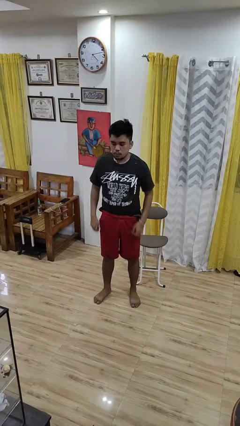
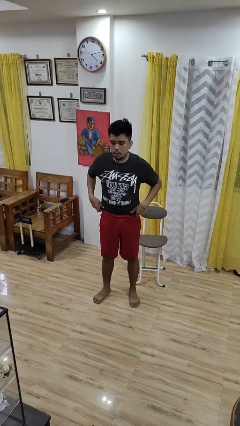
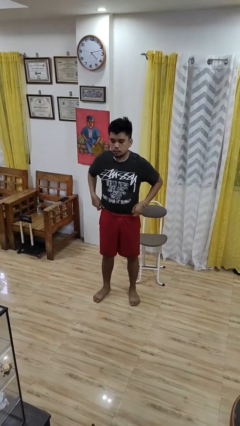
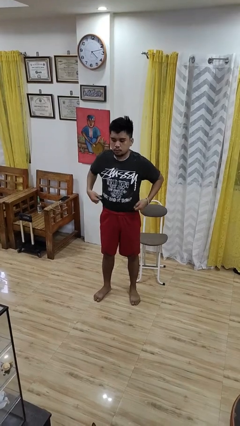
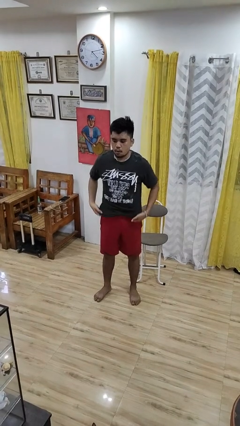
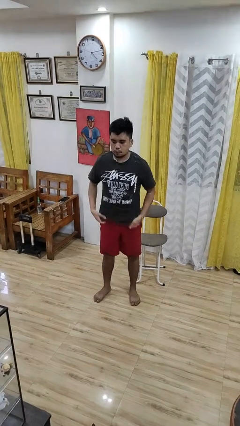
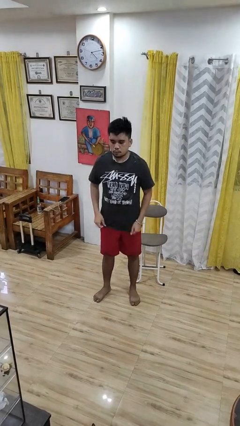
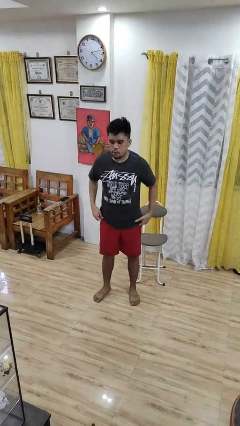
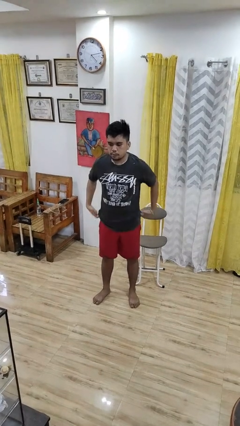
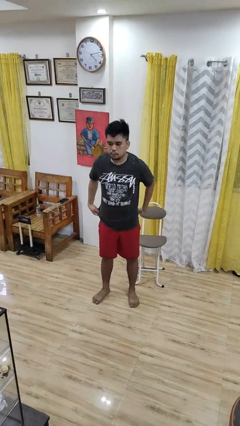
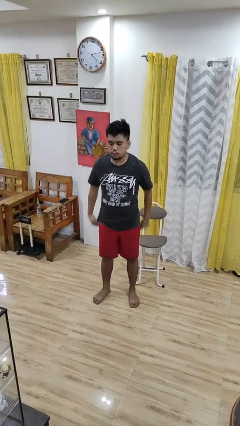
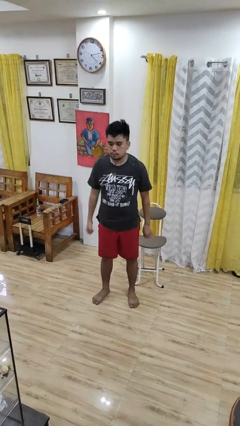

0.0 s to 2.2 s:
person untucks shirt

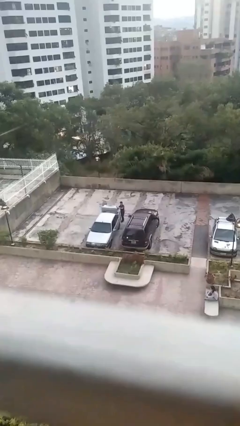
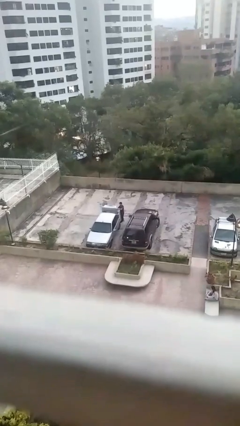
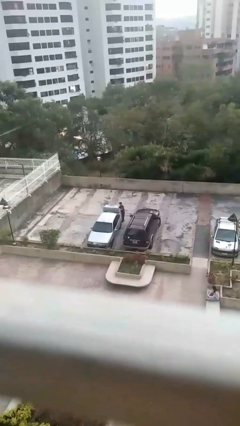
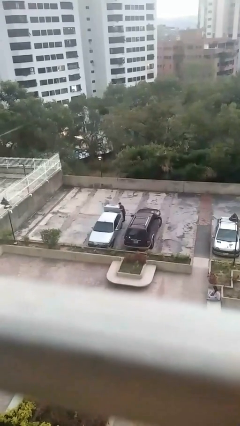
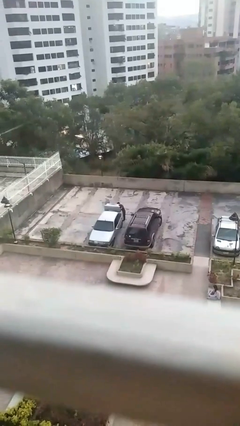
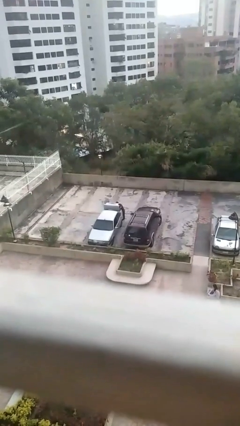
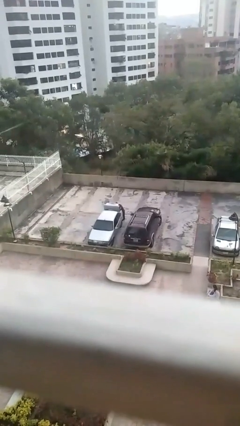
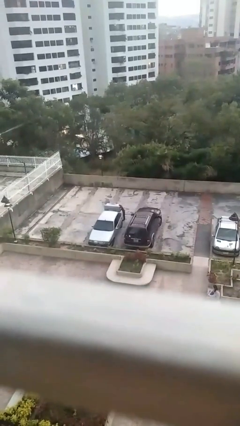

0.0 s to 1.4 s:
person loads car

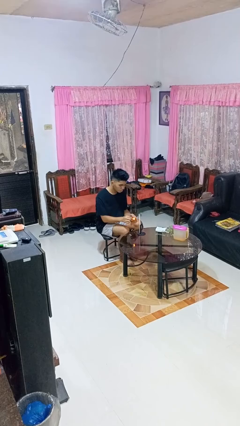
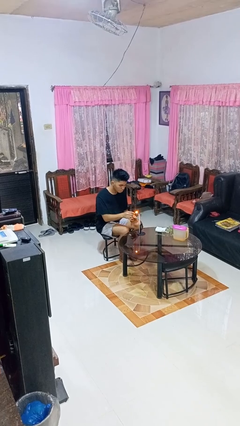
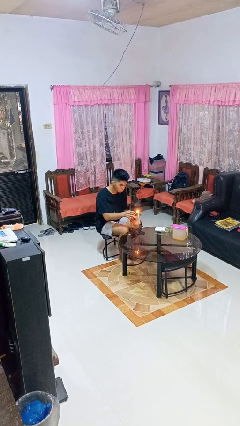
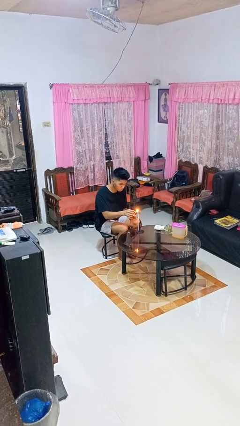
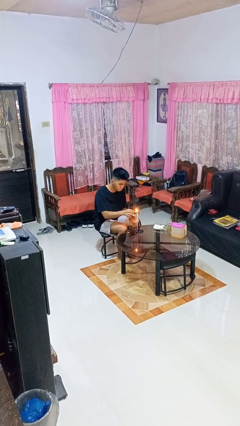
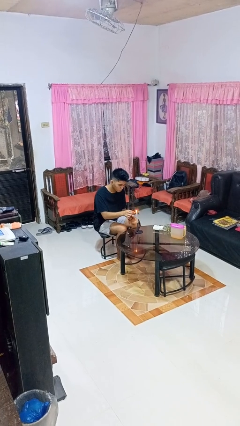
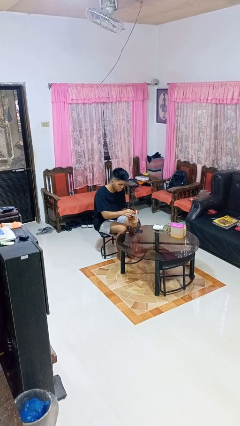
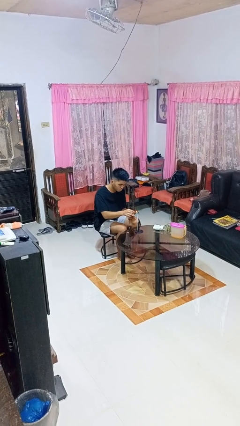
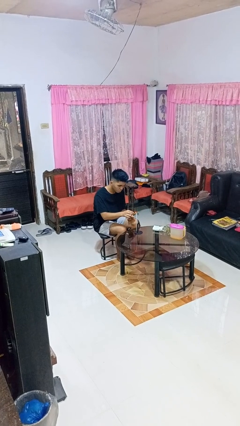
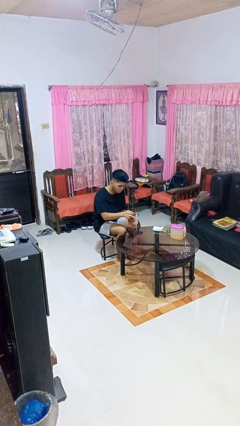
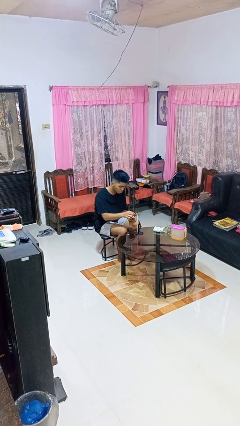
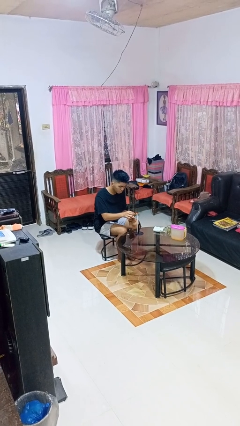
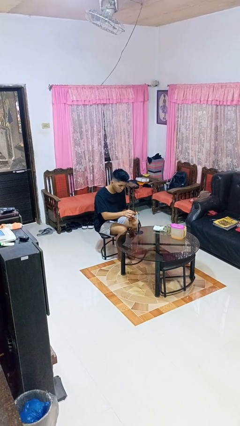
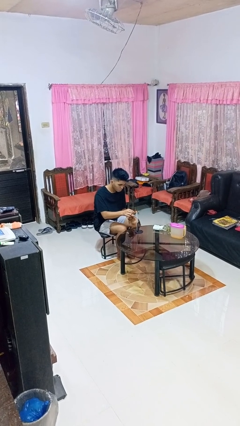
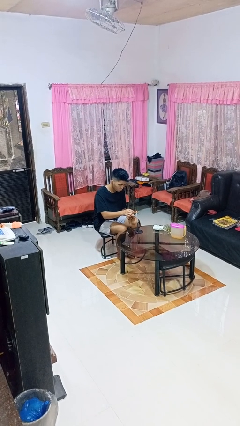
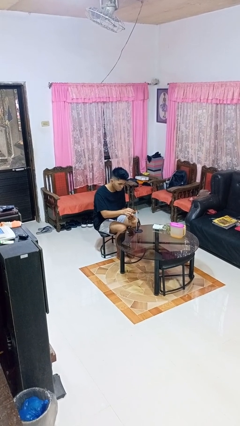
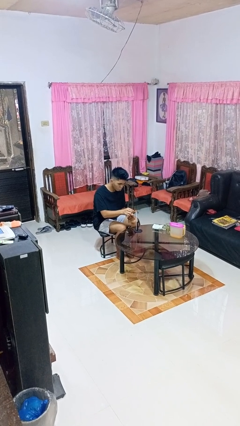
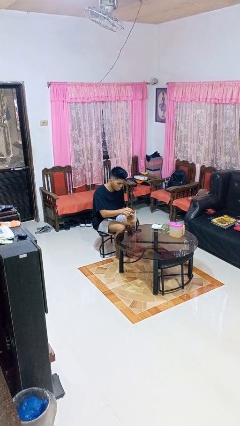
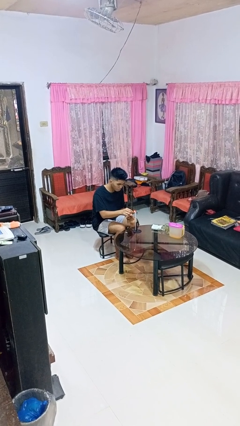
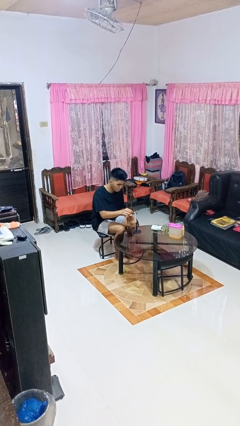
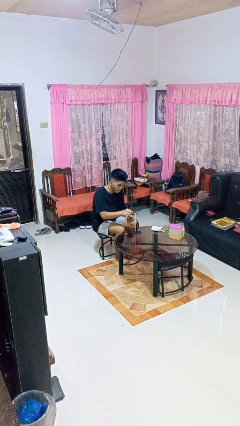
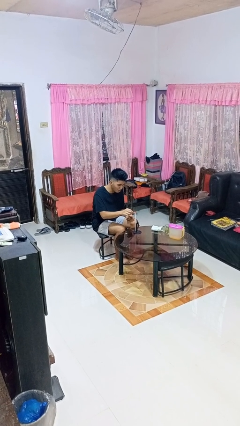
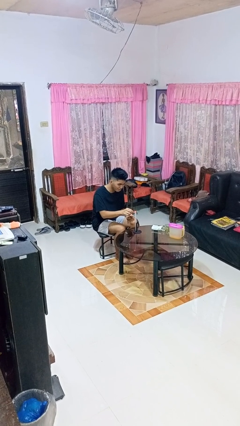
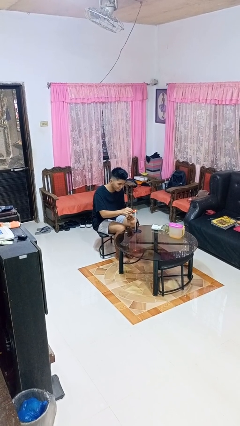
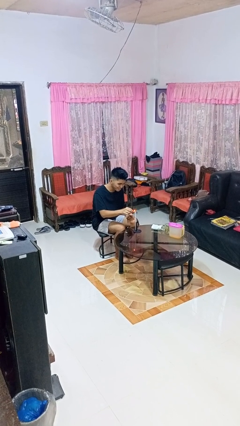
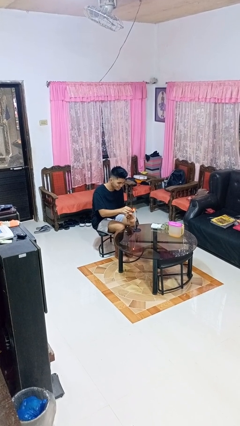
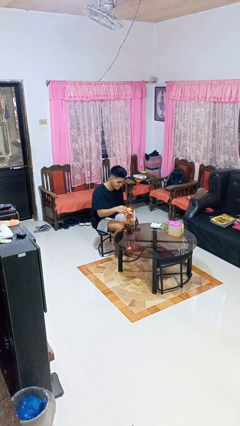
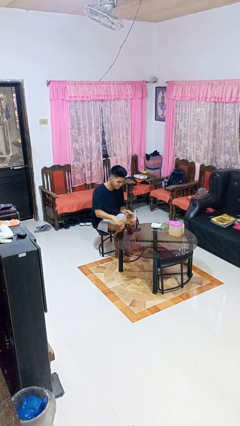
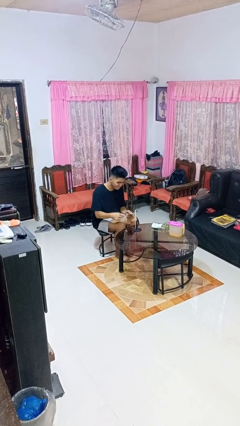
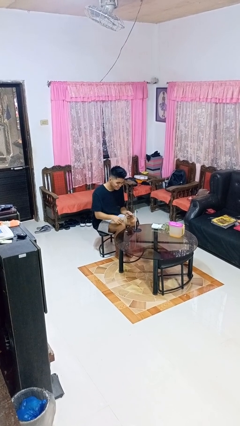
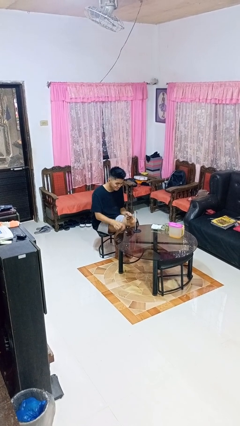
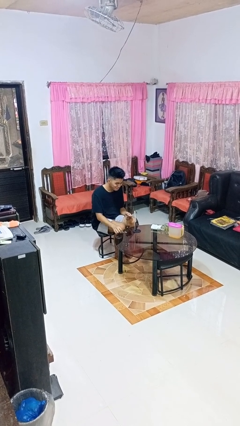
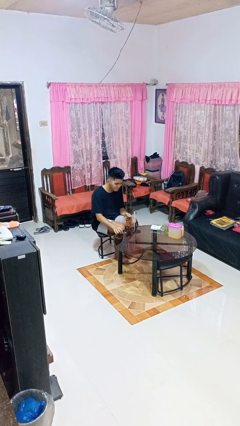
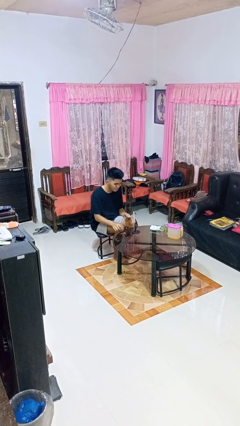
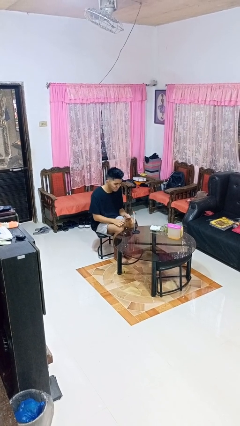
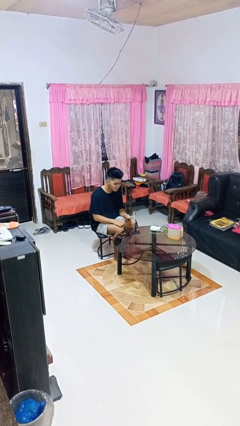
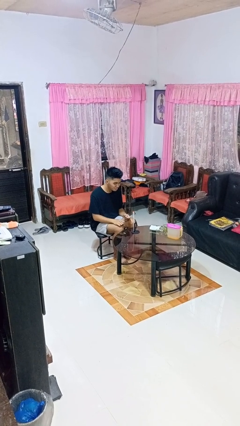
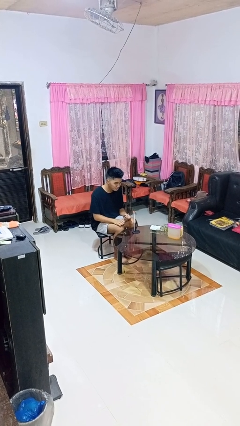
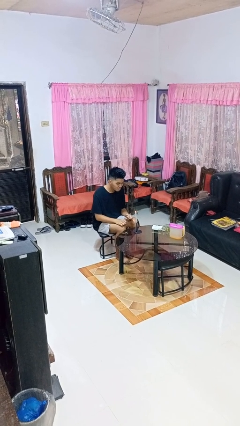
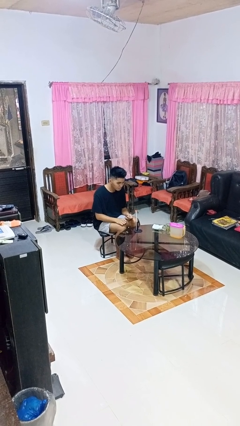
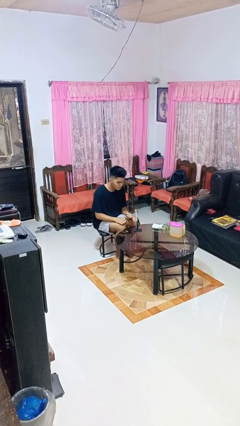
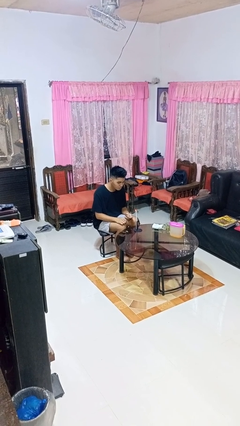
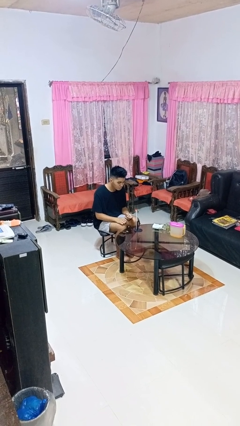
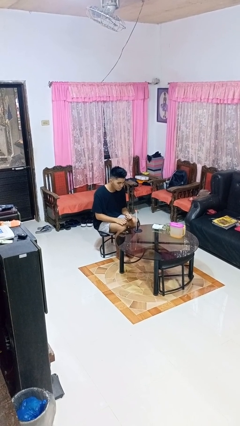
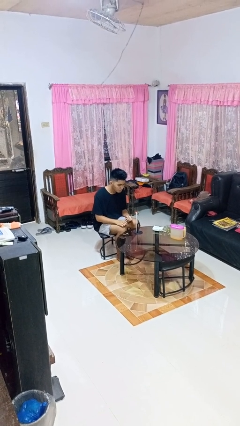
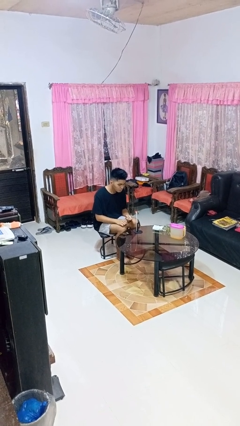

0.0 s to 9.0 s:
person lights candle

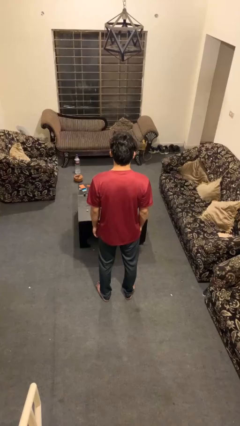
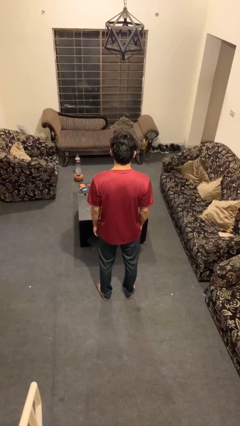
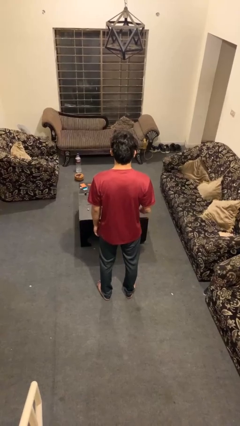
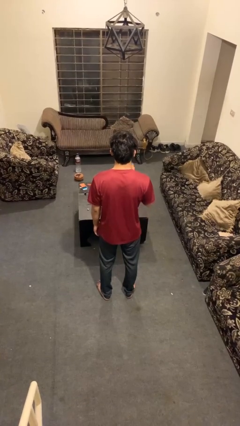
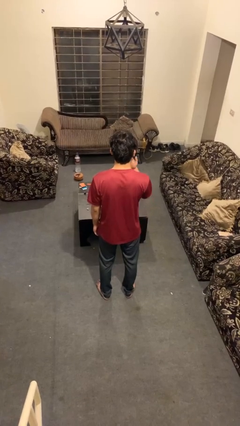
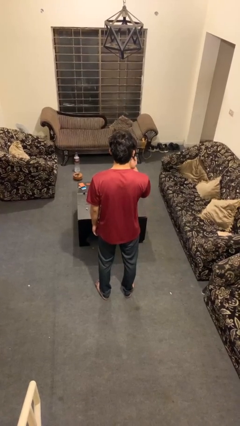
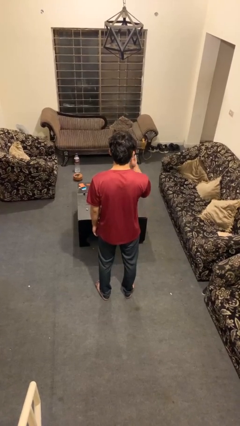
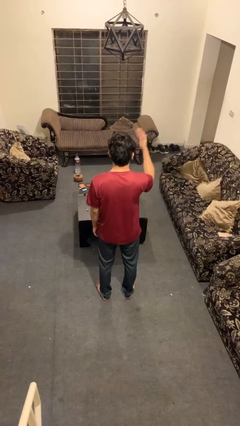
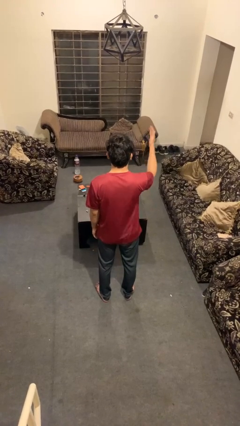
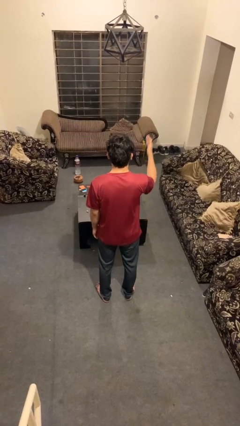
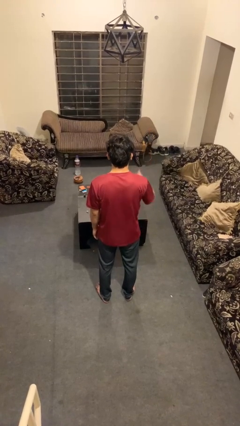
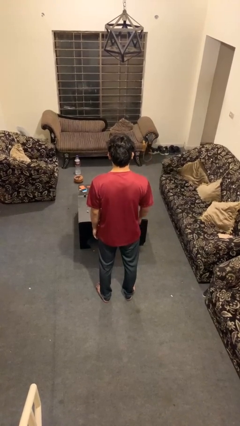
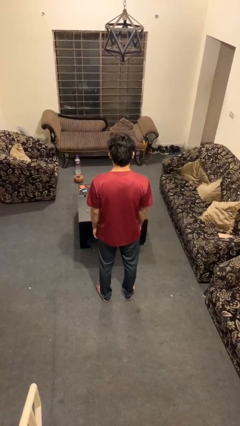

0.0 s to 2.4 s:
person gestures blow kiss

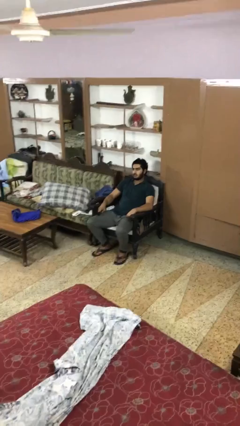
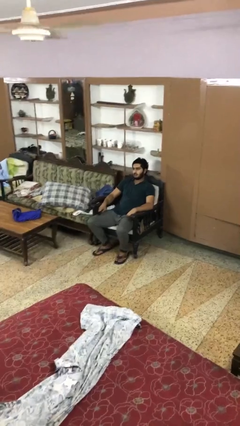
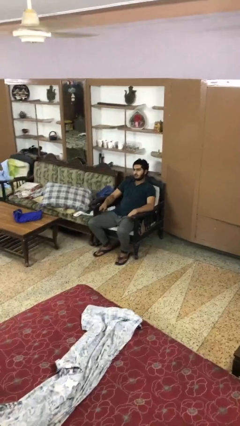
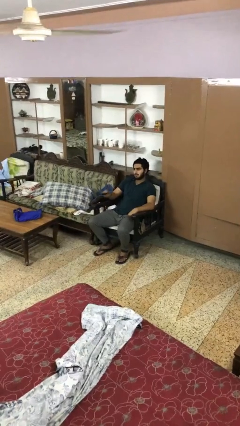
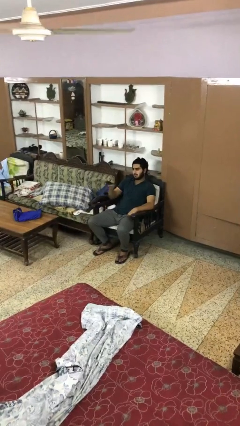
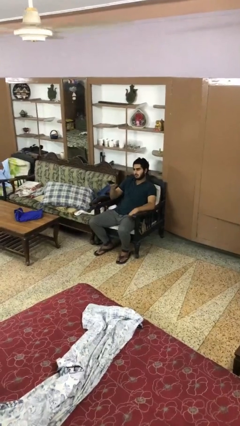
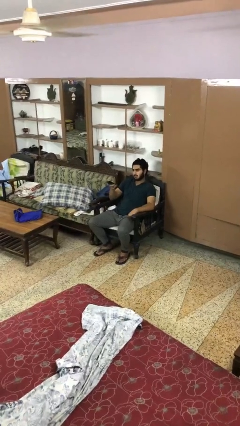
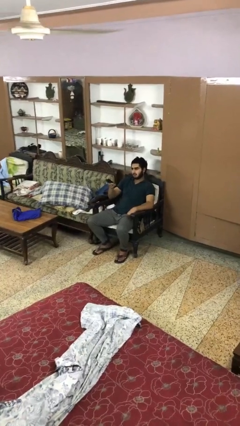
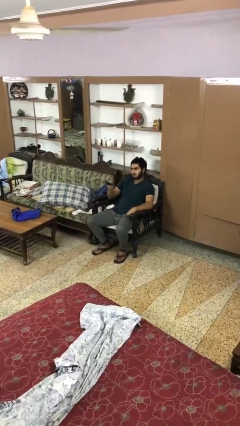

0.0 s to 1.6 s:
person uses television remote

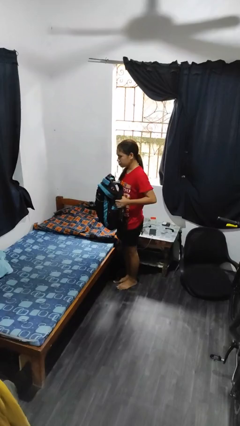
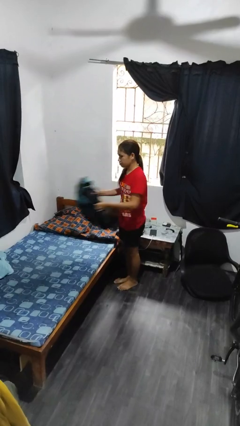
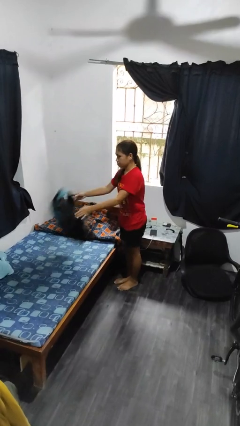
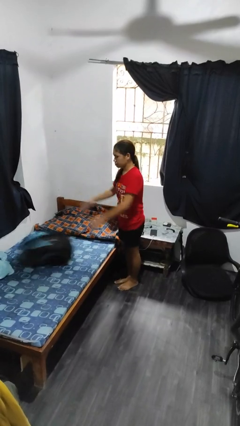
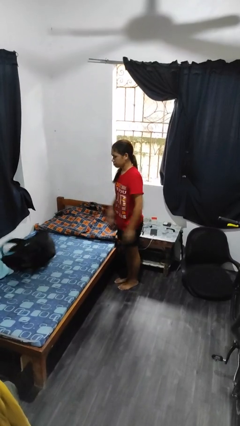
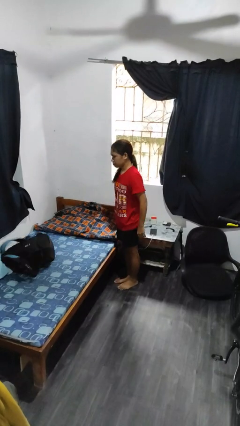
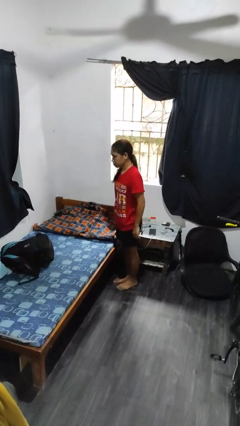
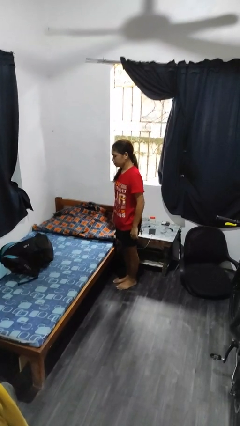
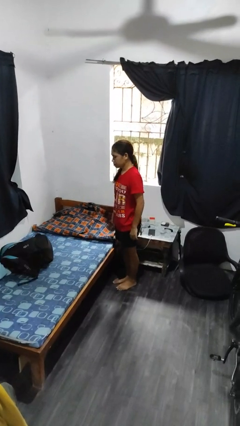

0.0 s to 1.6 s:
person throws object on bed
